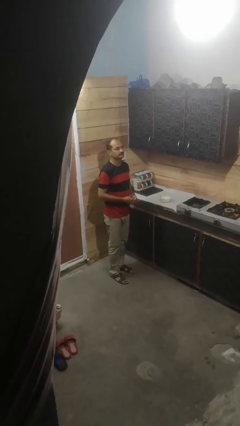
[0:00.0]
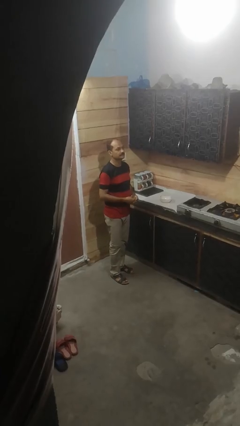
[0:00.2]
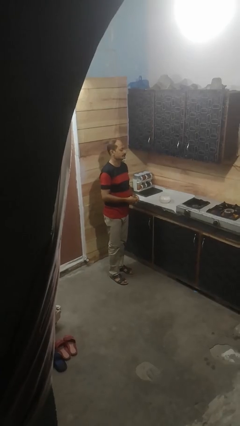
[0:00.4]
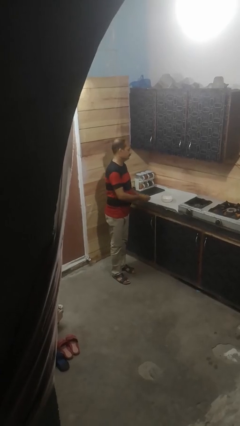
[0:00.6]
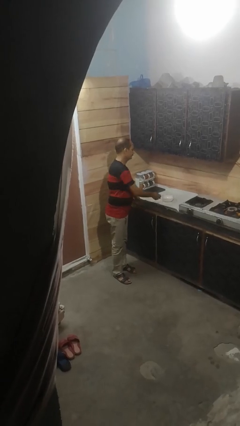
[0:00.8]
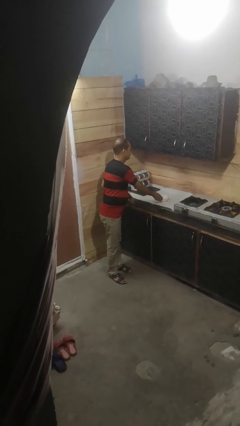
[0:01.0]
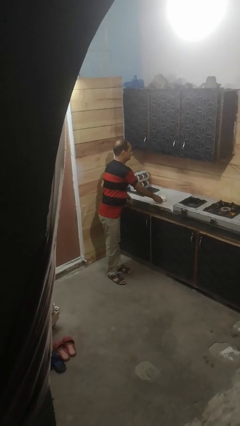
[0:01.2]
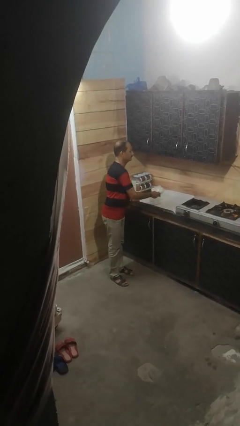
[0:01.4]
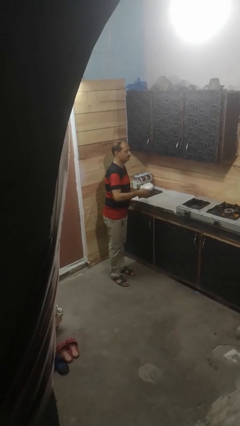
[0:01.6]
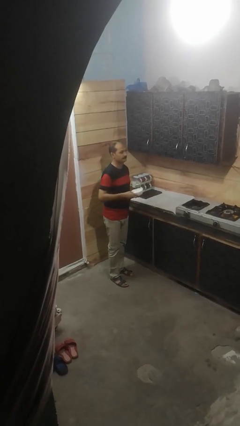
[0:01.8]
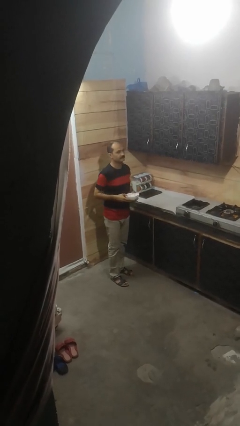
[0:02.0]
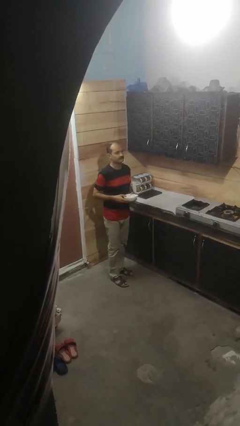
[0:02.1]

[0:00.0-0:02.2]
person picks up object from countertop

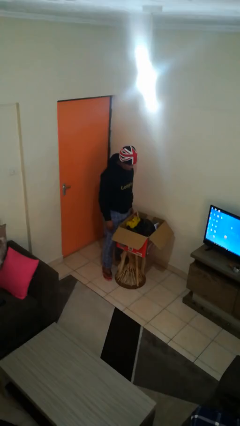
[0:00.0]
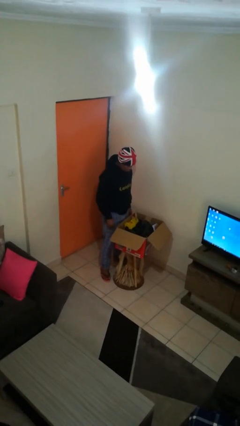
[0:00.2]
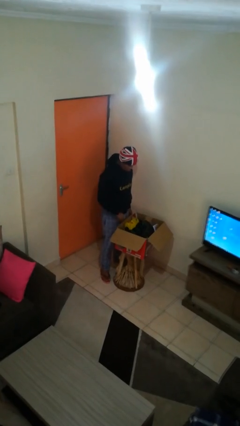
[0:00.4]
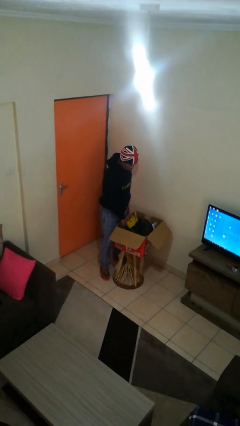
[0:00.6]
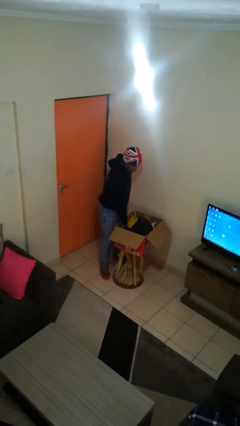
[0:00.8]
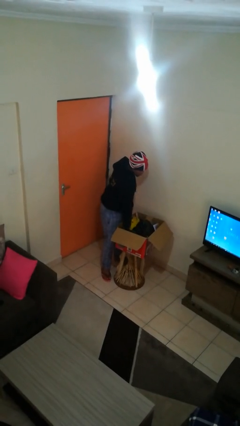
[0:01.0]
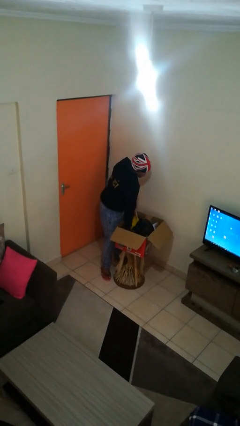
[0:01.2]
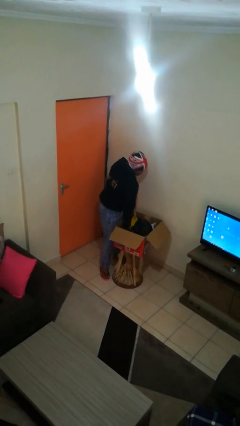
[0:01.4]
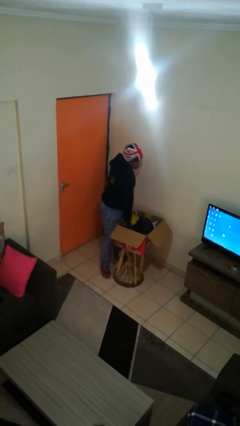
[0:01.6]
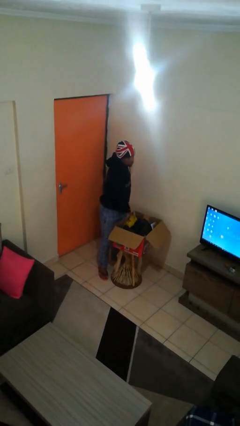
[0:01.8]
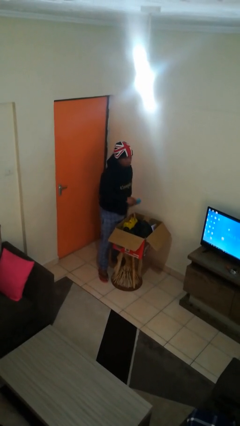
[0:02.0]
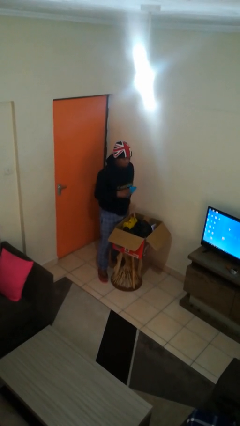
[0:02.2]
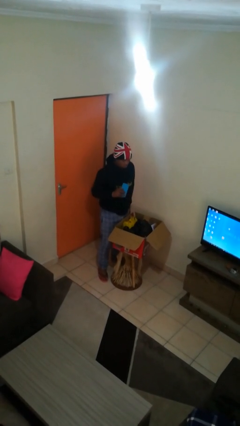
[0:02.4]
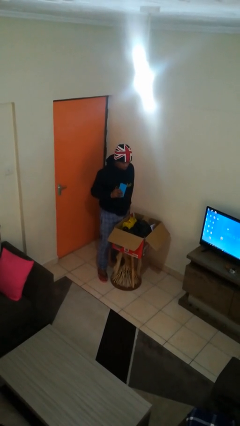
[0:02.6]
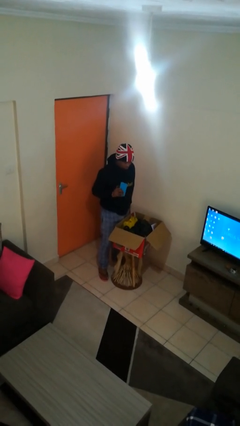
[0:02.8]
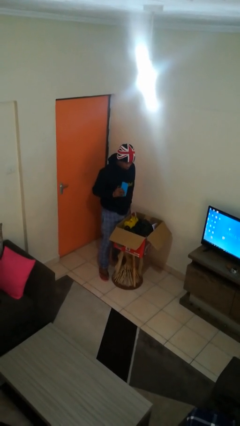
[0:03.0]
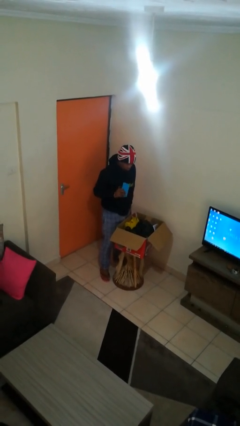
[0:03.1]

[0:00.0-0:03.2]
person takes object from box

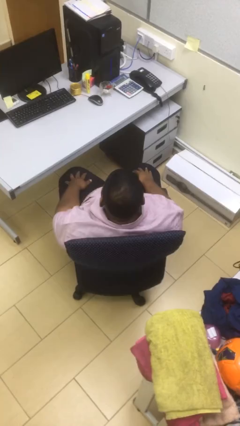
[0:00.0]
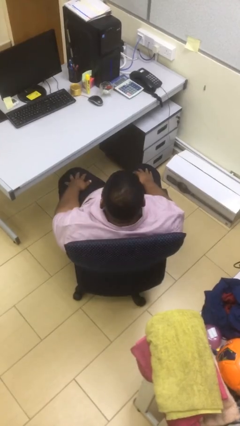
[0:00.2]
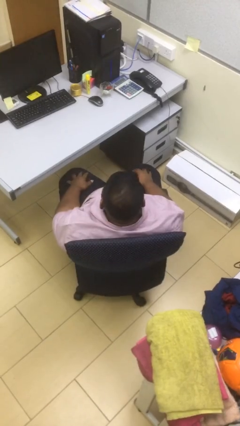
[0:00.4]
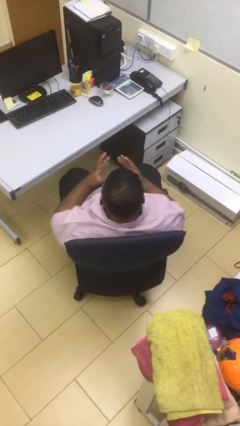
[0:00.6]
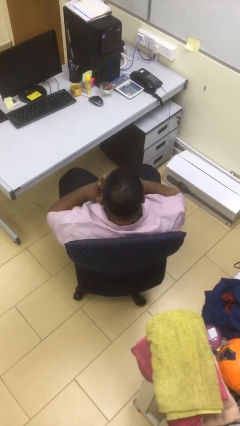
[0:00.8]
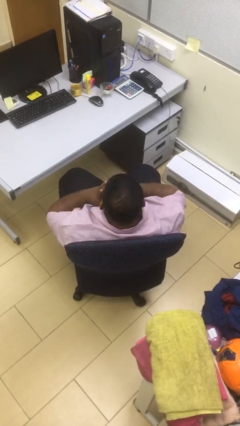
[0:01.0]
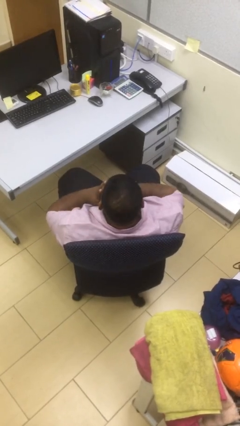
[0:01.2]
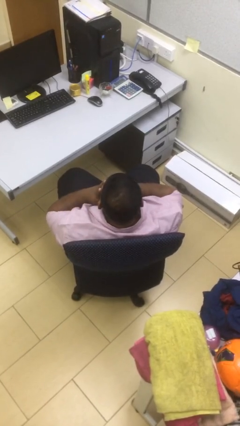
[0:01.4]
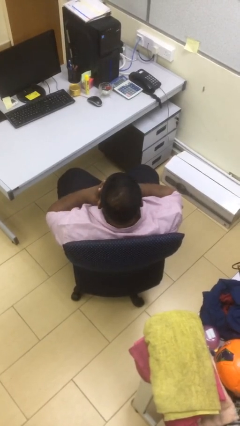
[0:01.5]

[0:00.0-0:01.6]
person covers face with hands

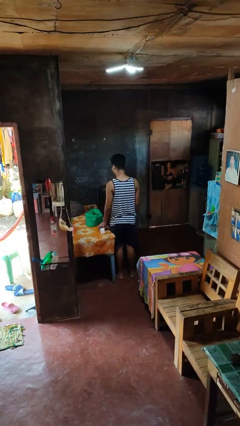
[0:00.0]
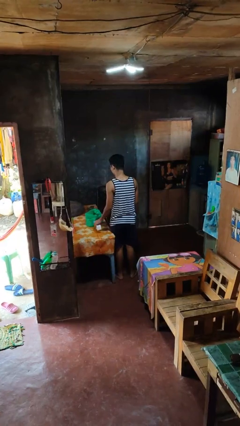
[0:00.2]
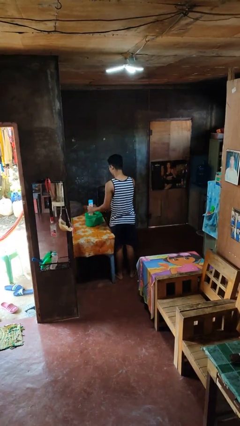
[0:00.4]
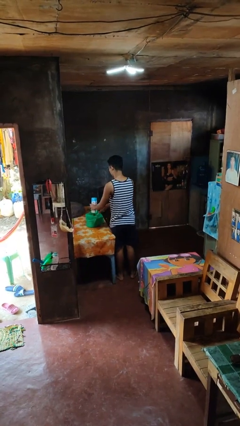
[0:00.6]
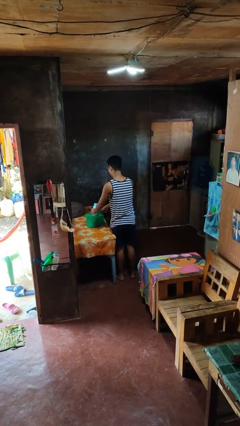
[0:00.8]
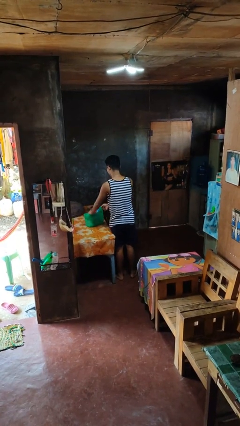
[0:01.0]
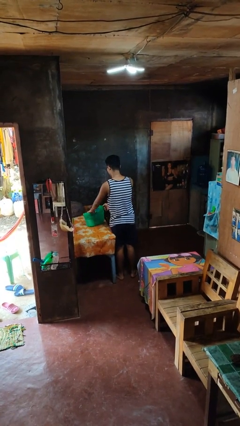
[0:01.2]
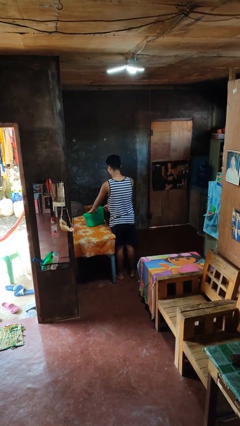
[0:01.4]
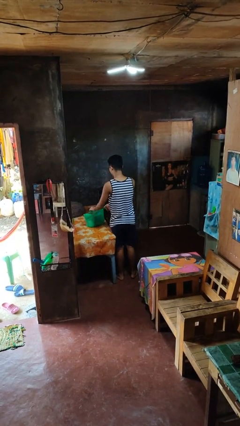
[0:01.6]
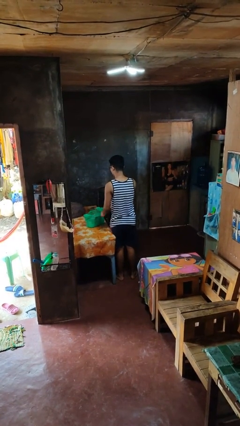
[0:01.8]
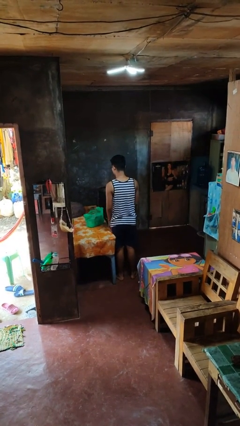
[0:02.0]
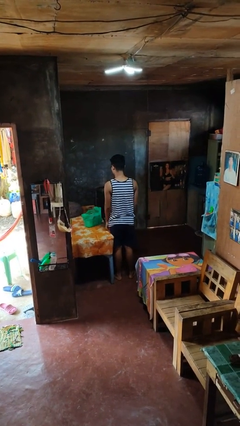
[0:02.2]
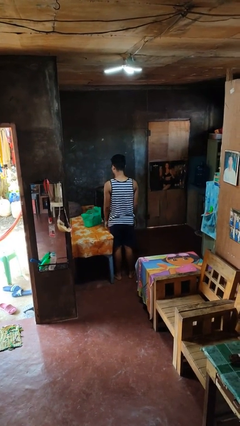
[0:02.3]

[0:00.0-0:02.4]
person puts object into bag

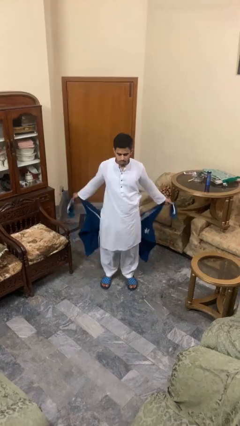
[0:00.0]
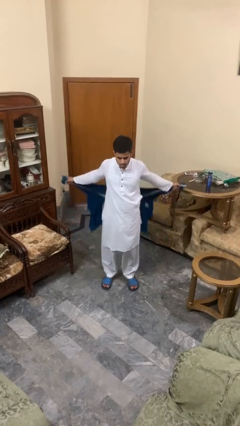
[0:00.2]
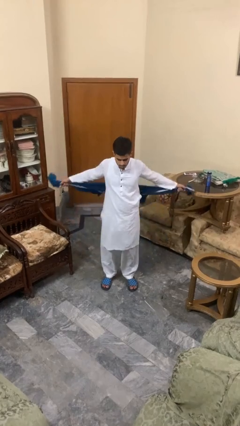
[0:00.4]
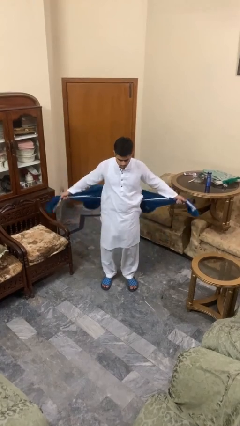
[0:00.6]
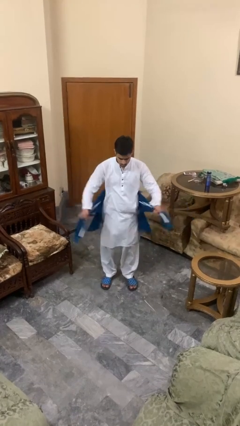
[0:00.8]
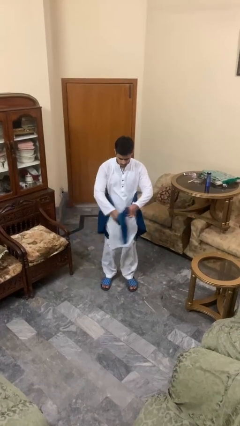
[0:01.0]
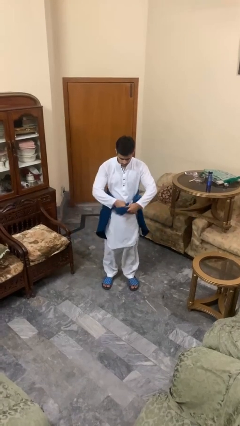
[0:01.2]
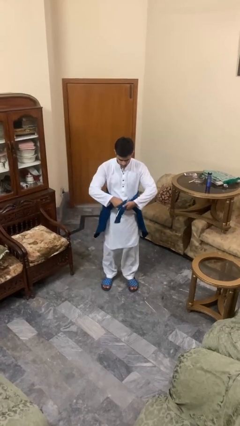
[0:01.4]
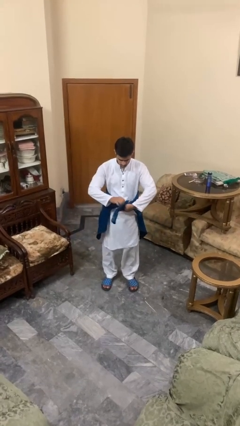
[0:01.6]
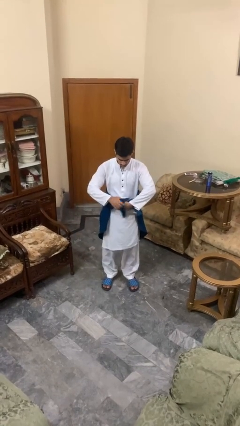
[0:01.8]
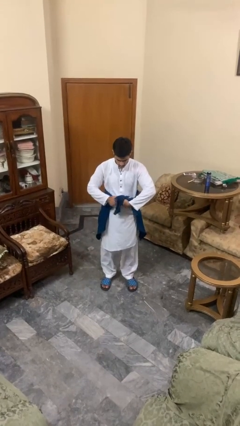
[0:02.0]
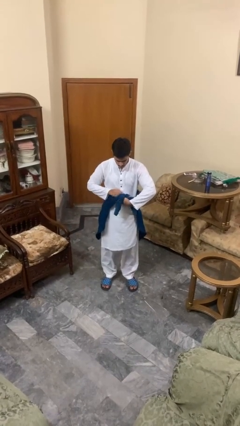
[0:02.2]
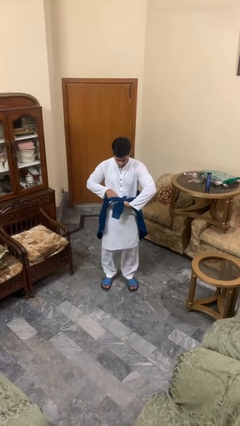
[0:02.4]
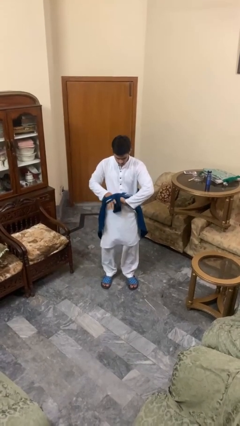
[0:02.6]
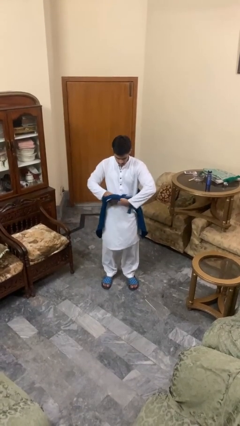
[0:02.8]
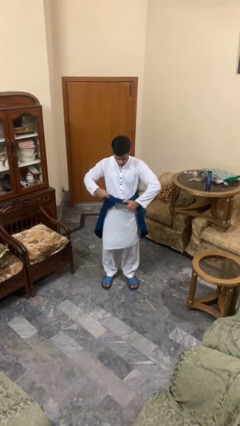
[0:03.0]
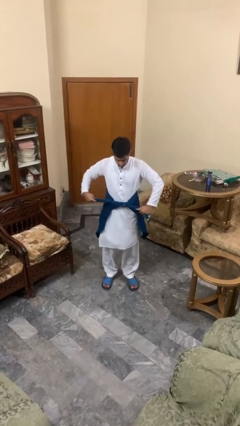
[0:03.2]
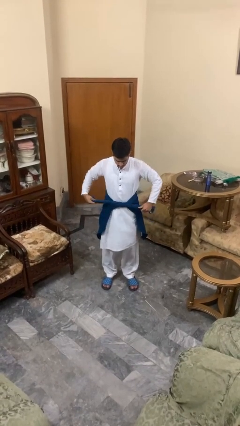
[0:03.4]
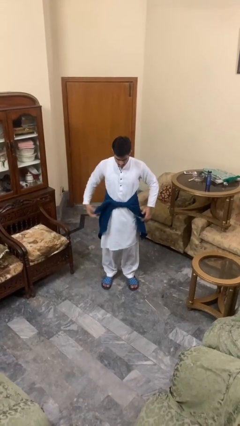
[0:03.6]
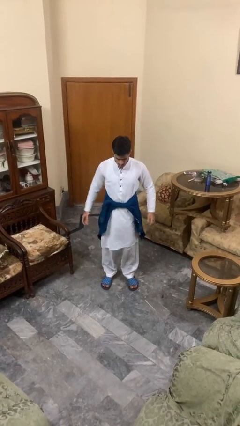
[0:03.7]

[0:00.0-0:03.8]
person ties jacket around waist

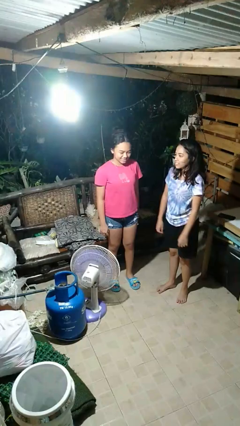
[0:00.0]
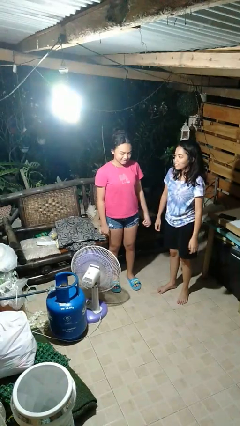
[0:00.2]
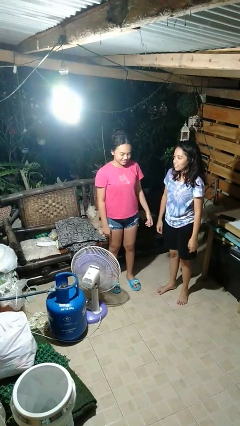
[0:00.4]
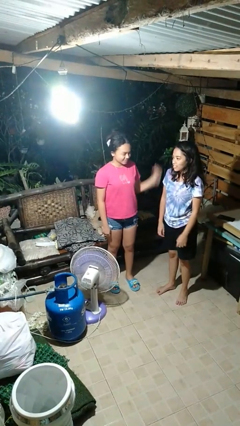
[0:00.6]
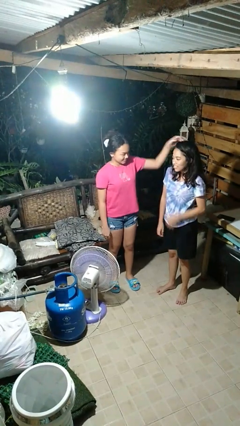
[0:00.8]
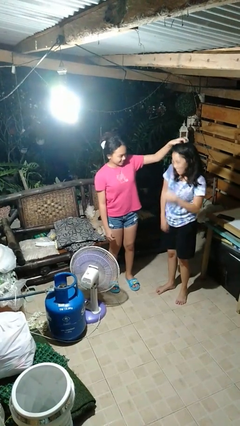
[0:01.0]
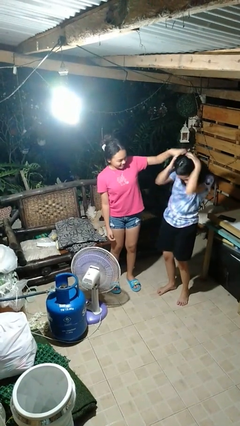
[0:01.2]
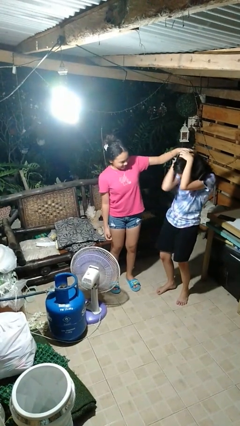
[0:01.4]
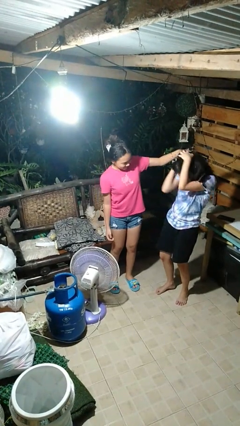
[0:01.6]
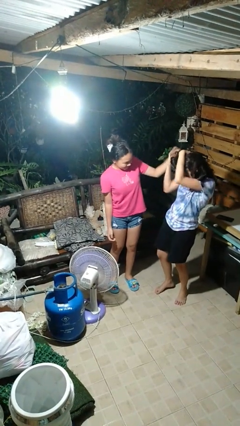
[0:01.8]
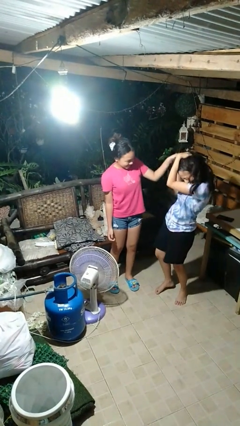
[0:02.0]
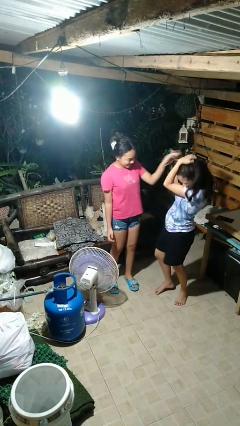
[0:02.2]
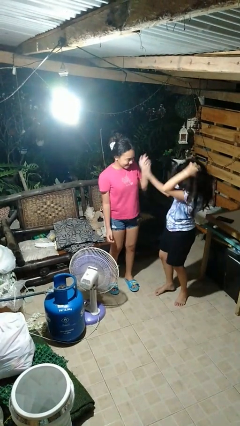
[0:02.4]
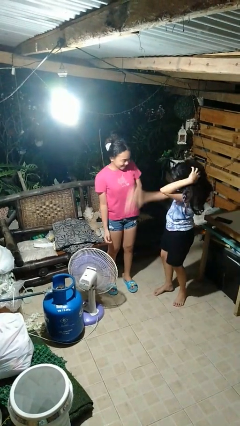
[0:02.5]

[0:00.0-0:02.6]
person tickles person

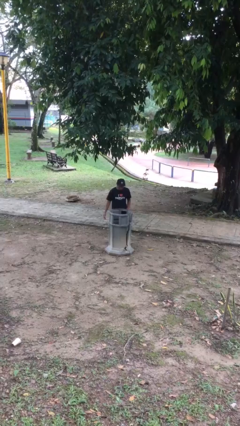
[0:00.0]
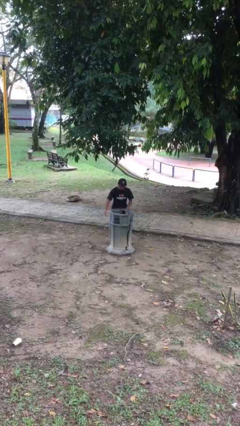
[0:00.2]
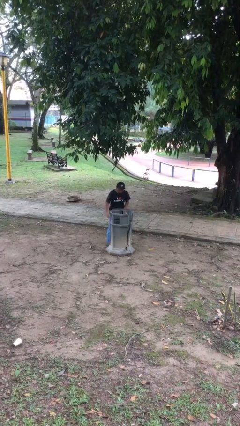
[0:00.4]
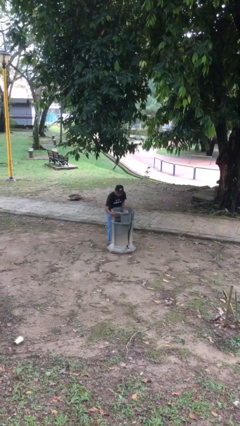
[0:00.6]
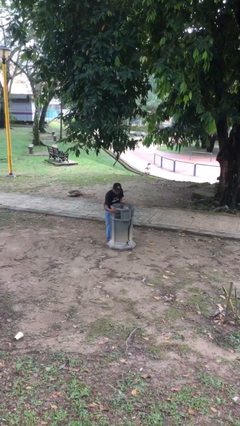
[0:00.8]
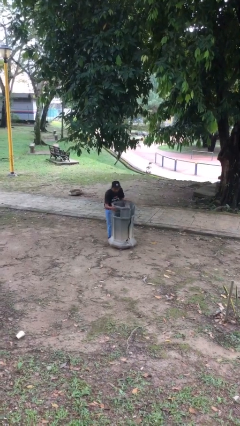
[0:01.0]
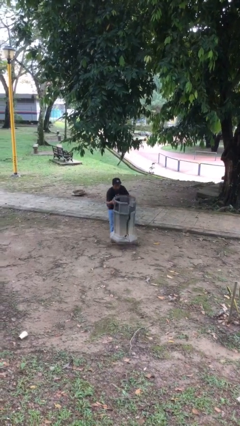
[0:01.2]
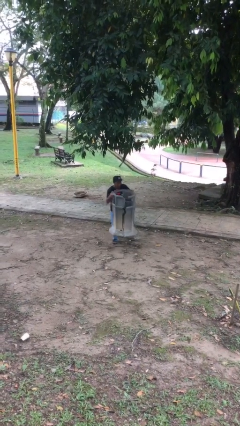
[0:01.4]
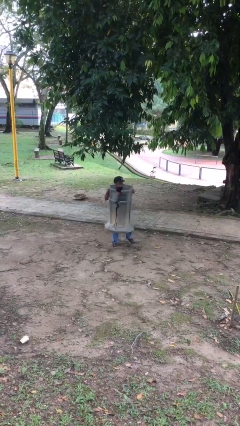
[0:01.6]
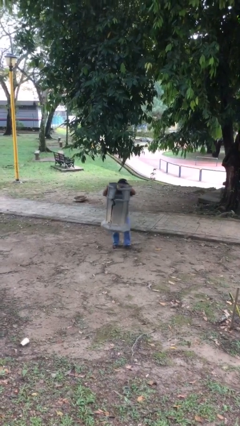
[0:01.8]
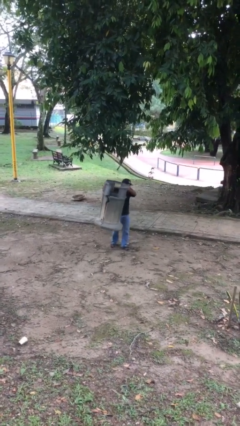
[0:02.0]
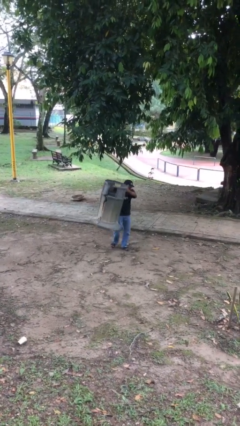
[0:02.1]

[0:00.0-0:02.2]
person picks up object from floor
